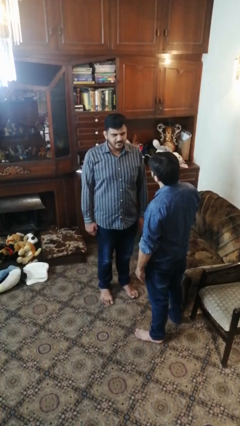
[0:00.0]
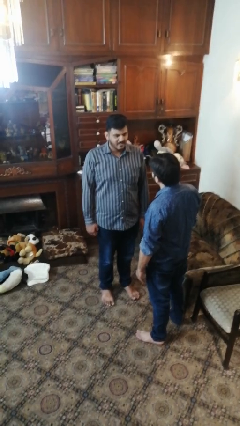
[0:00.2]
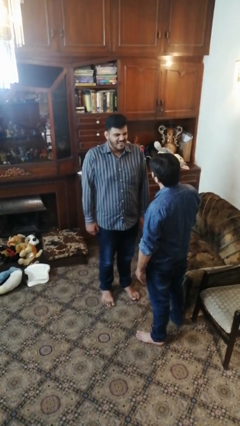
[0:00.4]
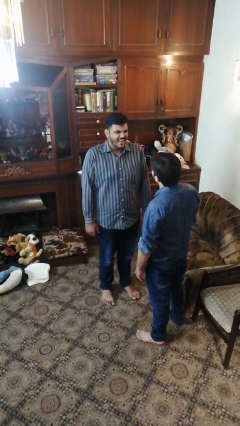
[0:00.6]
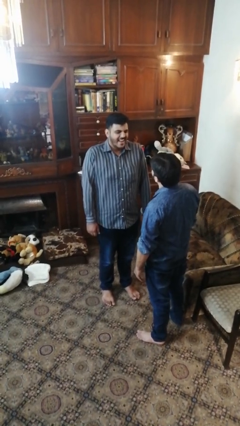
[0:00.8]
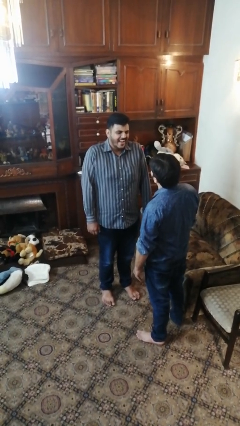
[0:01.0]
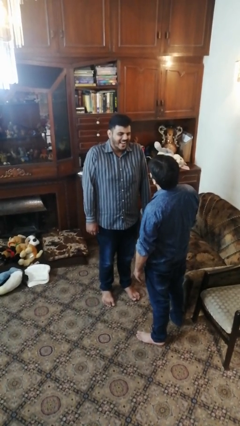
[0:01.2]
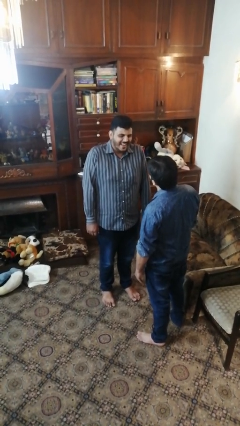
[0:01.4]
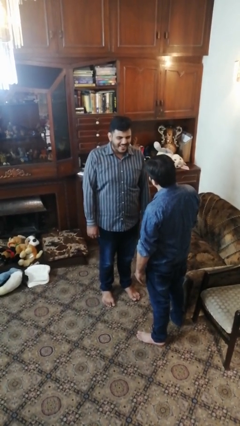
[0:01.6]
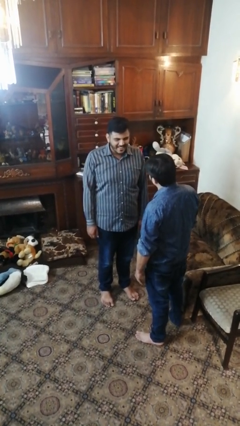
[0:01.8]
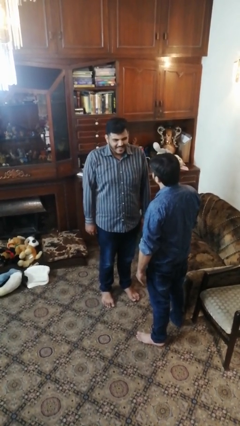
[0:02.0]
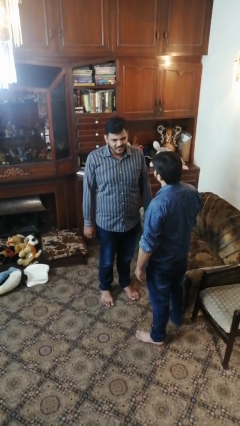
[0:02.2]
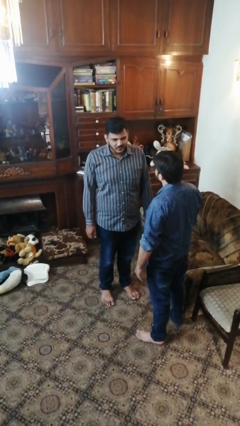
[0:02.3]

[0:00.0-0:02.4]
person laughs with person

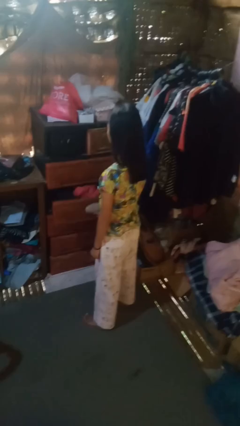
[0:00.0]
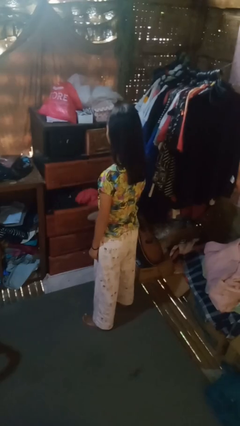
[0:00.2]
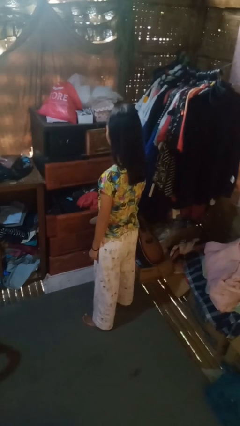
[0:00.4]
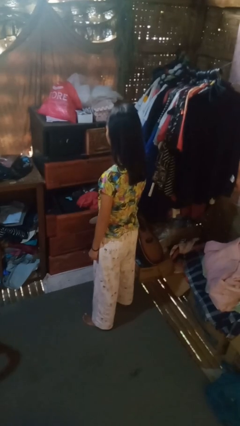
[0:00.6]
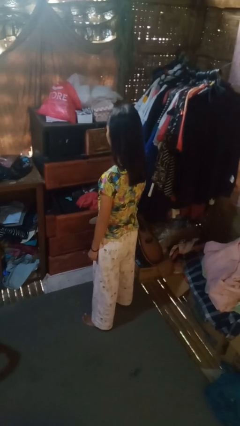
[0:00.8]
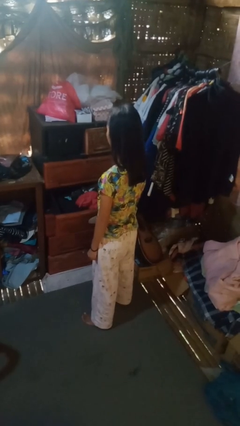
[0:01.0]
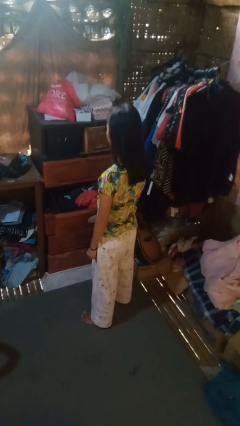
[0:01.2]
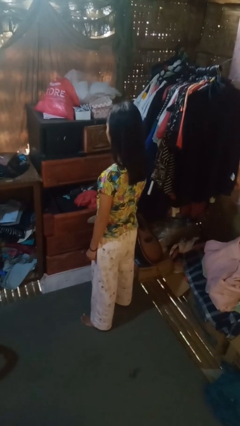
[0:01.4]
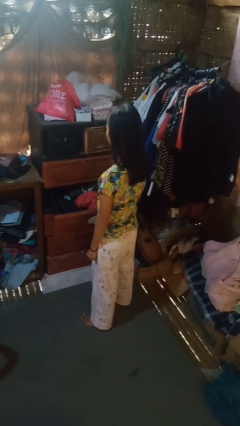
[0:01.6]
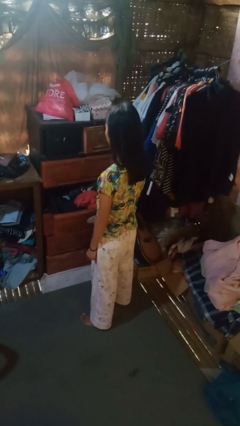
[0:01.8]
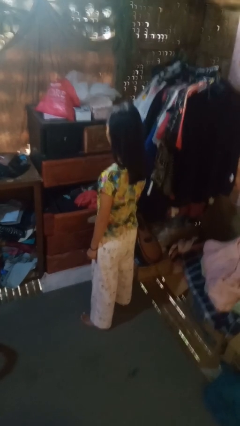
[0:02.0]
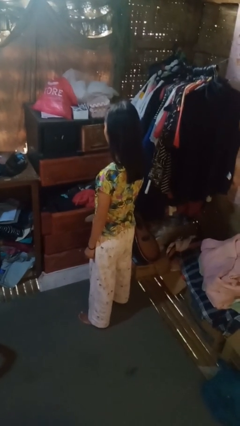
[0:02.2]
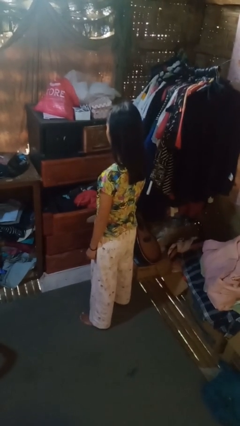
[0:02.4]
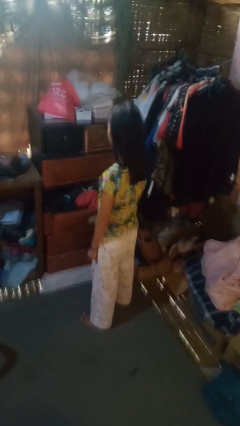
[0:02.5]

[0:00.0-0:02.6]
person opens dresser drawer

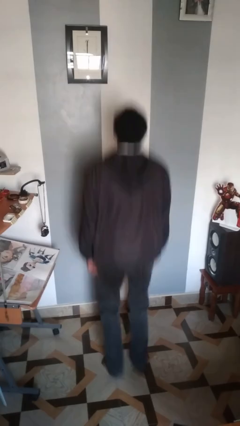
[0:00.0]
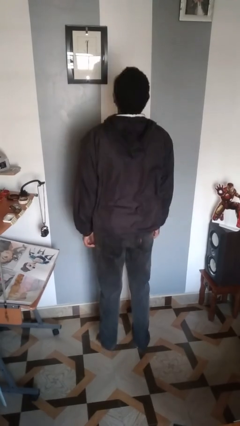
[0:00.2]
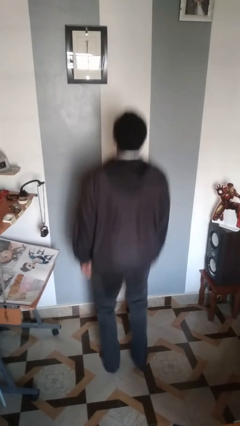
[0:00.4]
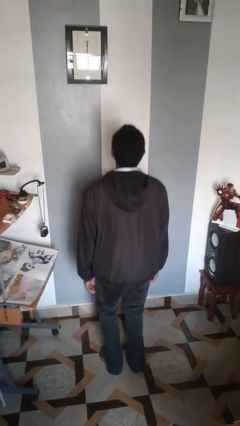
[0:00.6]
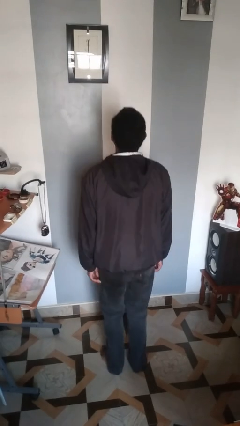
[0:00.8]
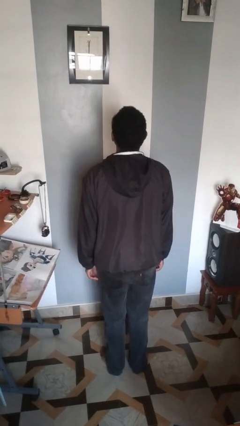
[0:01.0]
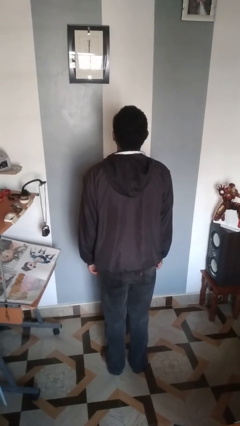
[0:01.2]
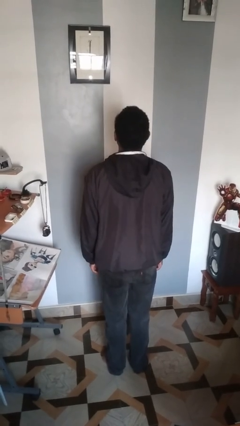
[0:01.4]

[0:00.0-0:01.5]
person jumps

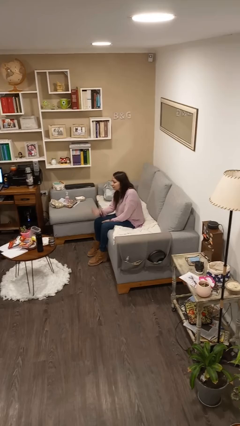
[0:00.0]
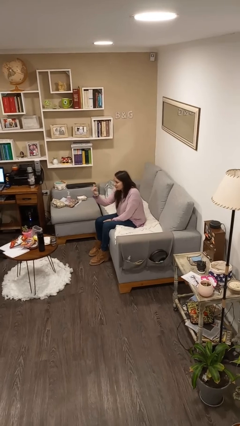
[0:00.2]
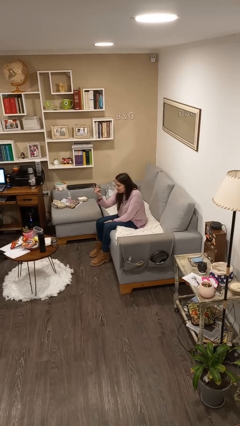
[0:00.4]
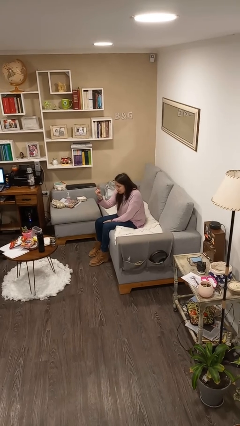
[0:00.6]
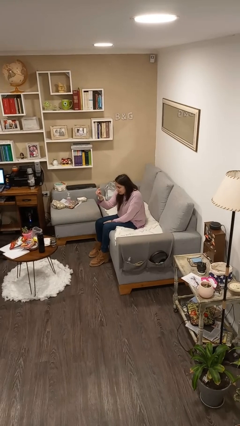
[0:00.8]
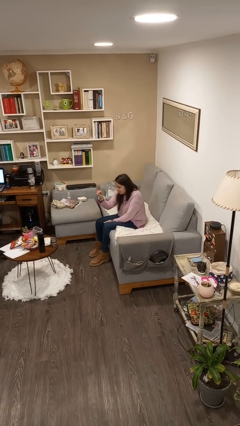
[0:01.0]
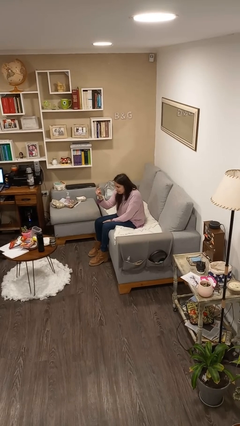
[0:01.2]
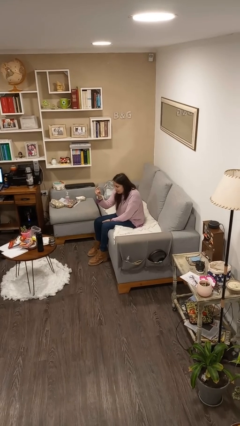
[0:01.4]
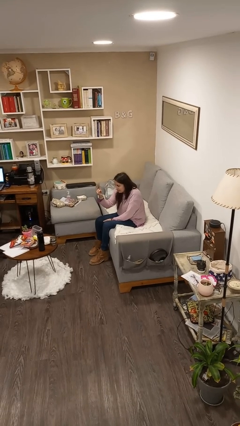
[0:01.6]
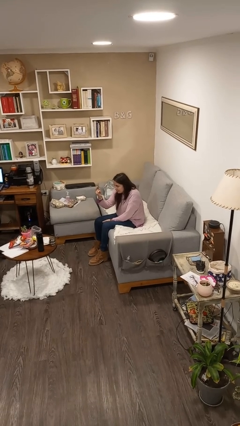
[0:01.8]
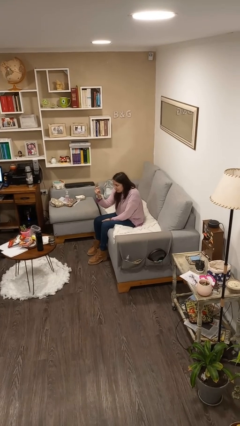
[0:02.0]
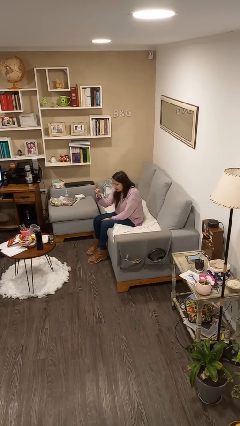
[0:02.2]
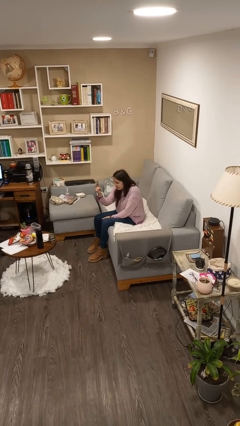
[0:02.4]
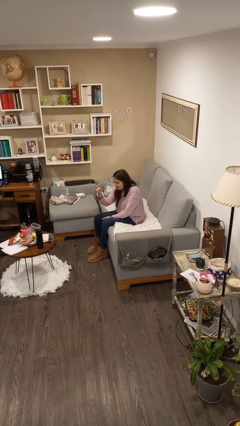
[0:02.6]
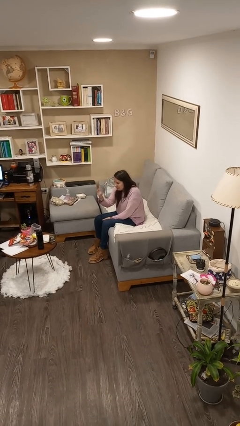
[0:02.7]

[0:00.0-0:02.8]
person gestures come here

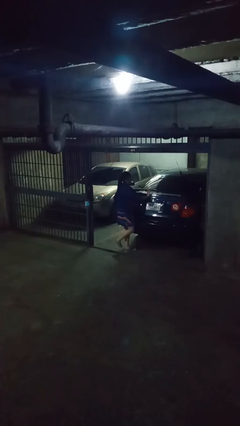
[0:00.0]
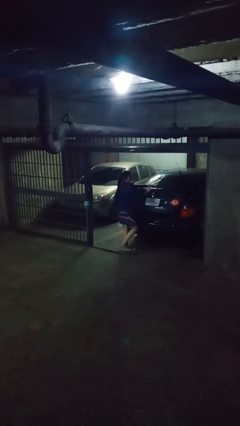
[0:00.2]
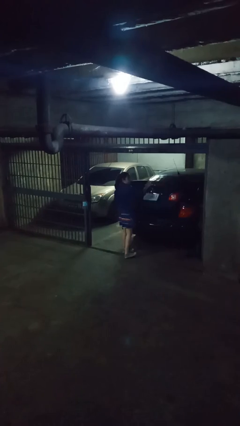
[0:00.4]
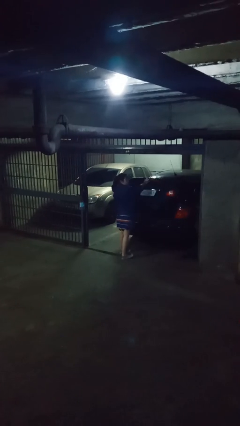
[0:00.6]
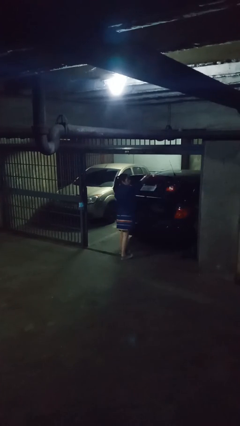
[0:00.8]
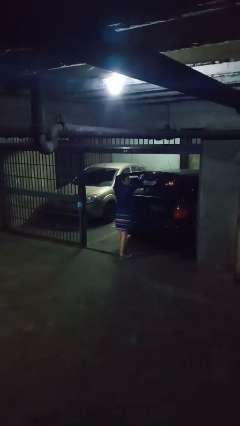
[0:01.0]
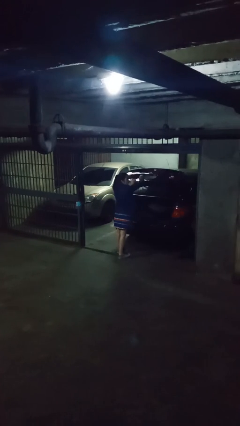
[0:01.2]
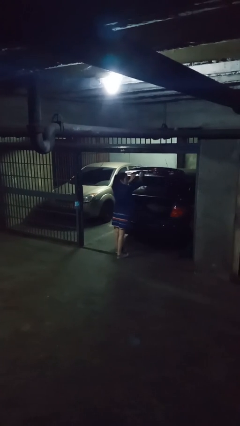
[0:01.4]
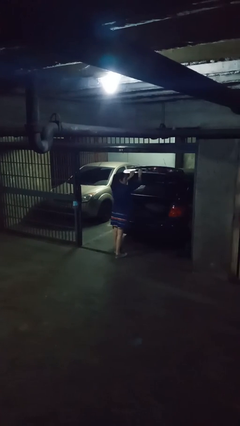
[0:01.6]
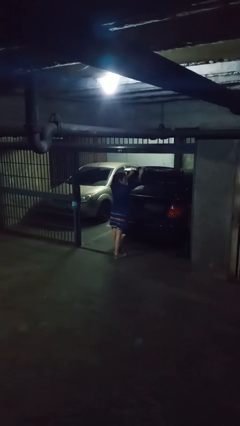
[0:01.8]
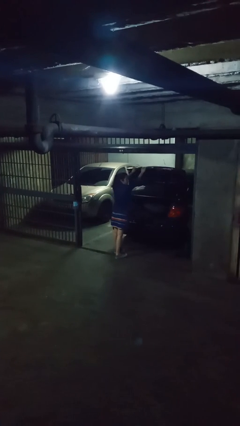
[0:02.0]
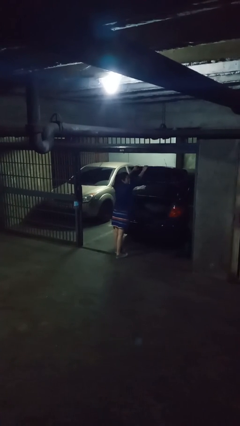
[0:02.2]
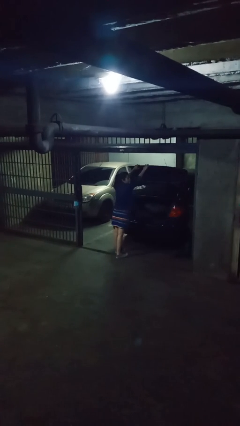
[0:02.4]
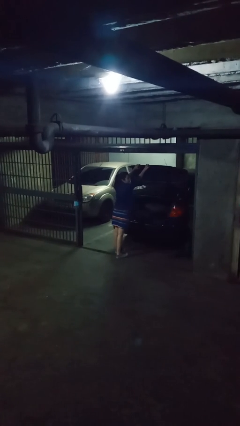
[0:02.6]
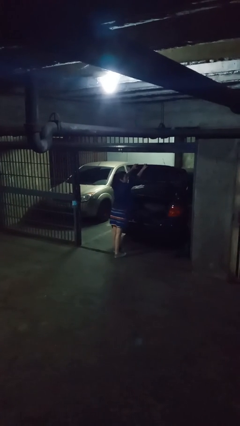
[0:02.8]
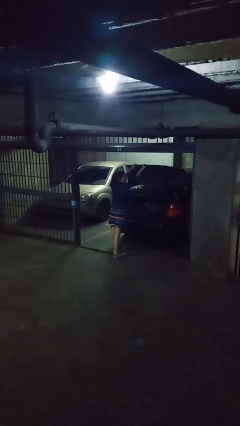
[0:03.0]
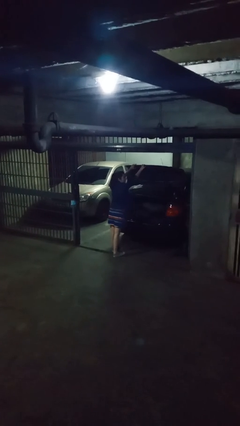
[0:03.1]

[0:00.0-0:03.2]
person opens car trunk

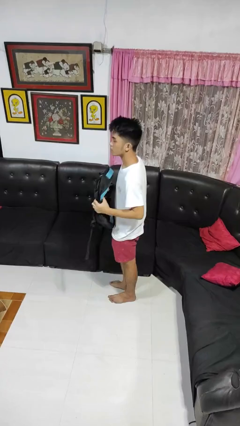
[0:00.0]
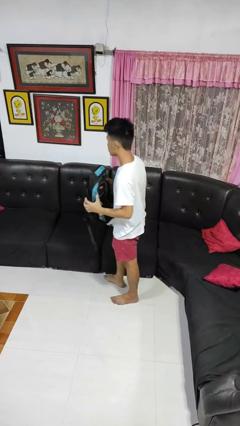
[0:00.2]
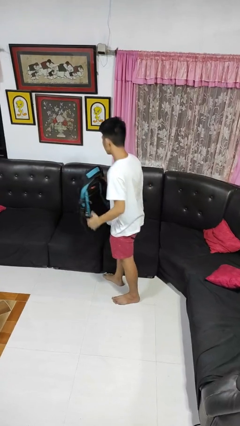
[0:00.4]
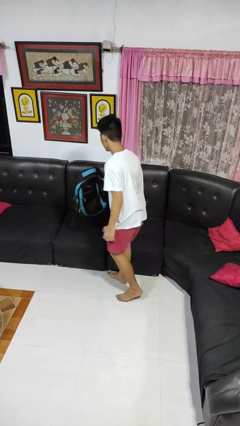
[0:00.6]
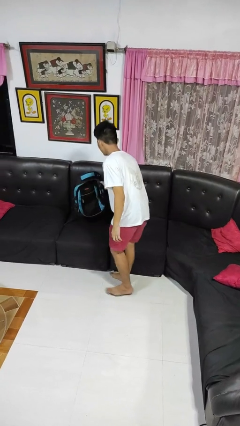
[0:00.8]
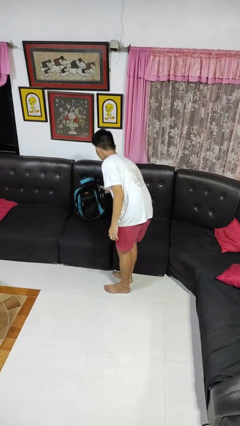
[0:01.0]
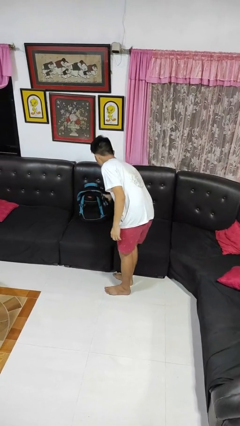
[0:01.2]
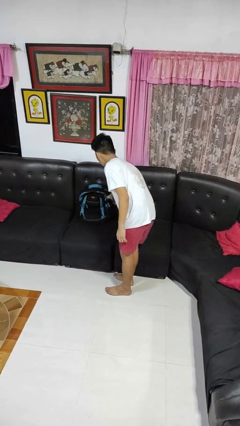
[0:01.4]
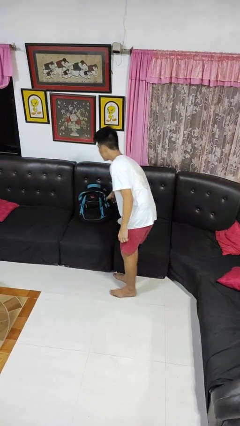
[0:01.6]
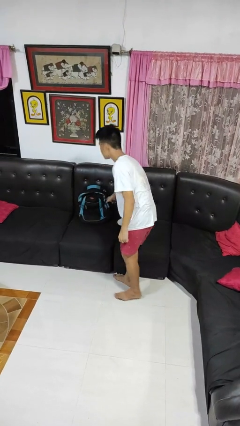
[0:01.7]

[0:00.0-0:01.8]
person puts down object on couch

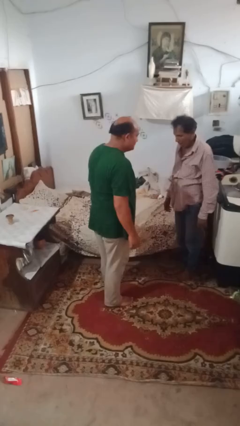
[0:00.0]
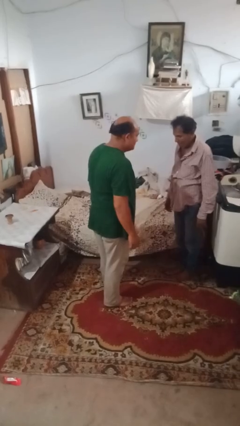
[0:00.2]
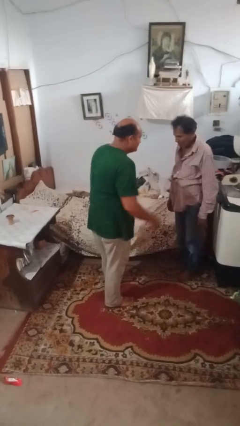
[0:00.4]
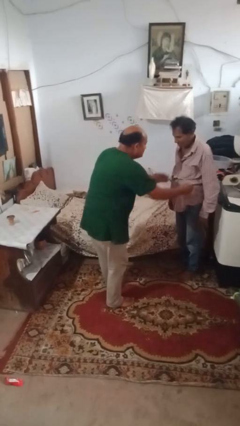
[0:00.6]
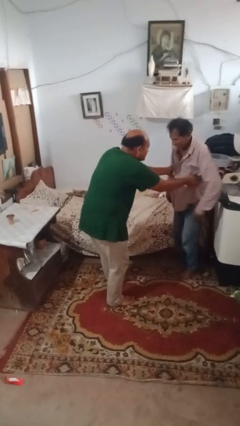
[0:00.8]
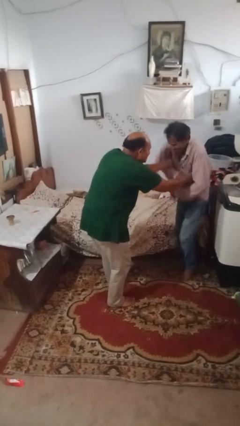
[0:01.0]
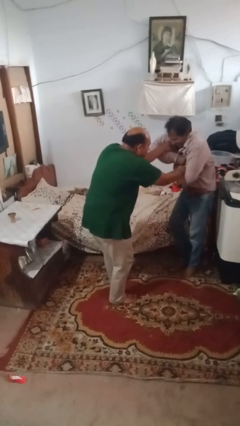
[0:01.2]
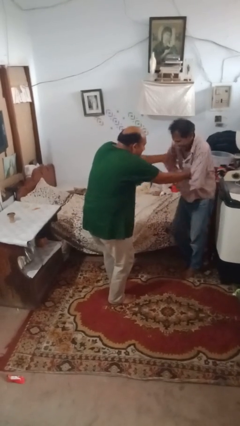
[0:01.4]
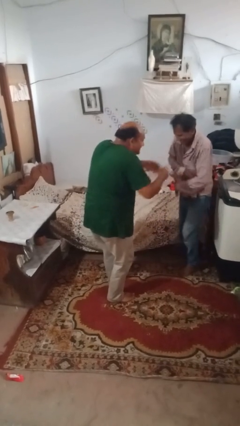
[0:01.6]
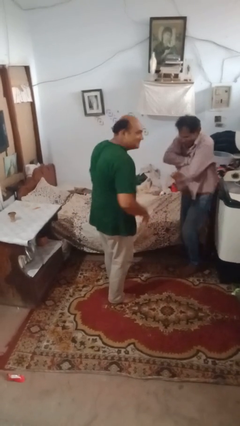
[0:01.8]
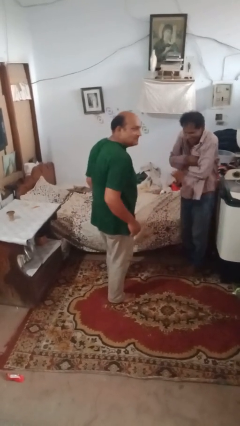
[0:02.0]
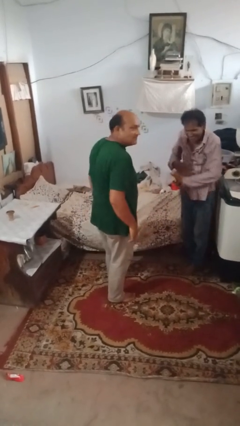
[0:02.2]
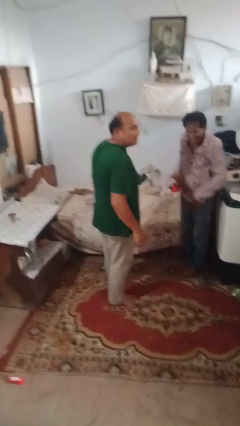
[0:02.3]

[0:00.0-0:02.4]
person tickles person

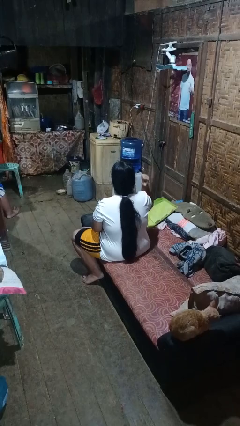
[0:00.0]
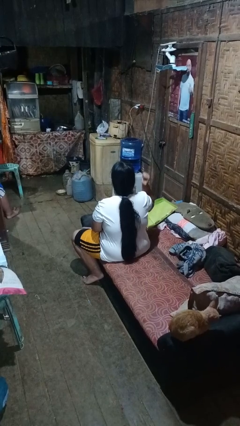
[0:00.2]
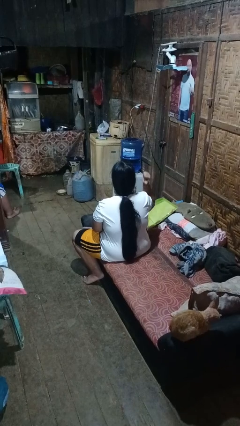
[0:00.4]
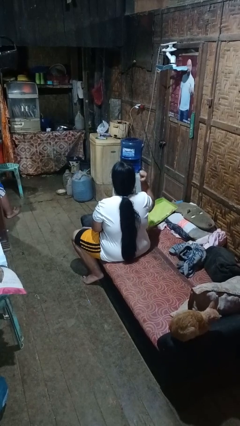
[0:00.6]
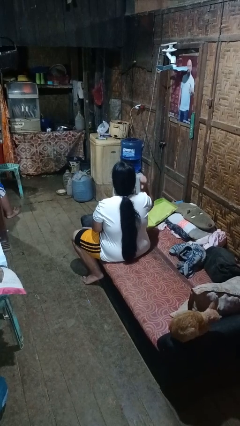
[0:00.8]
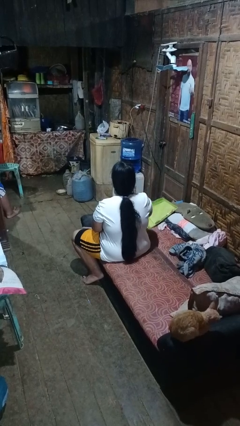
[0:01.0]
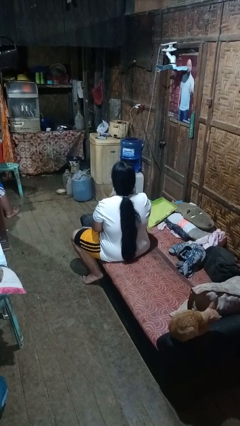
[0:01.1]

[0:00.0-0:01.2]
person gestures behind me
